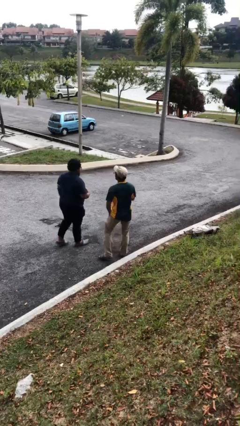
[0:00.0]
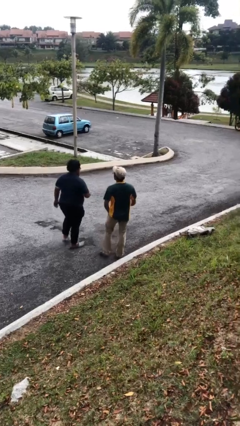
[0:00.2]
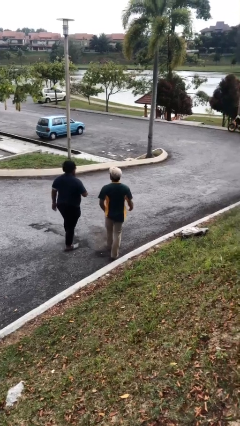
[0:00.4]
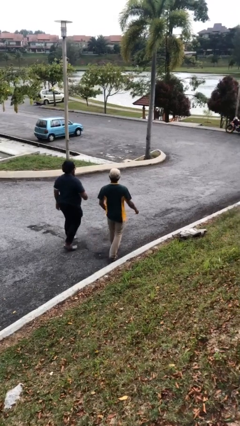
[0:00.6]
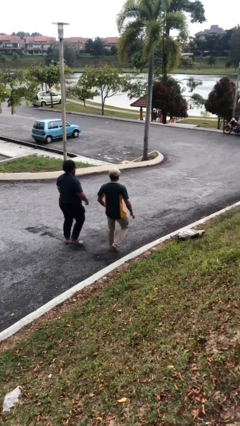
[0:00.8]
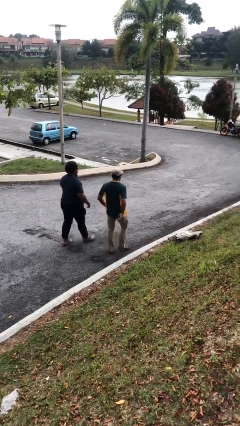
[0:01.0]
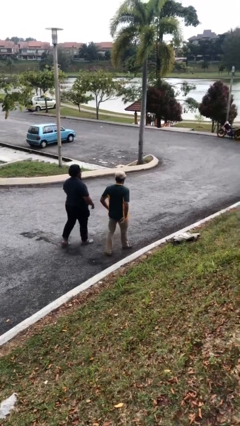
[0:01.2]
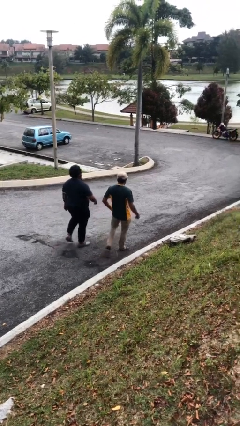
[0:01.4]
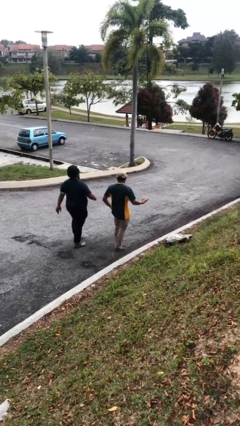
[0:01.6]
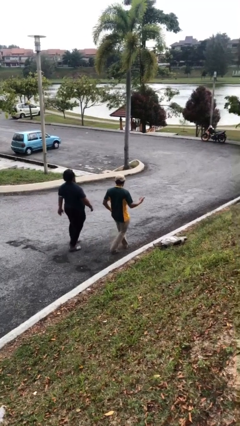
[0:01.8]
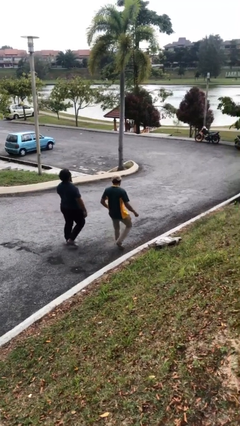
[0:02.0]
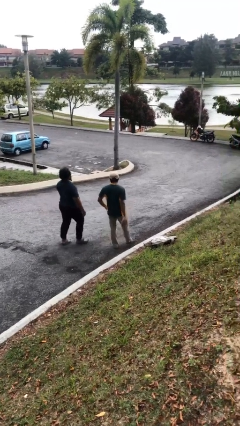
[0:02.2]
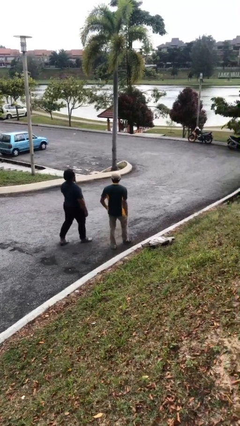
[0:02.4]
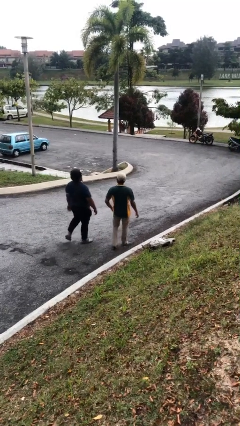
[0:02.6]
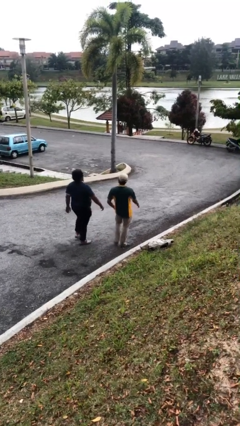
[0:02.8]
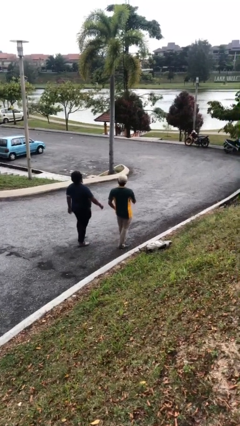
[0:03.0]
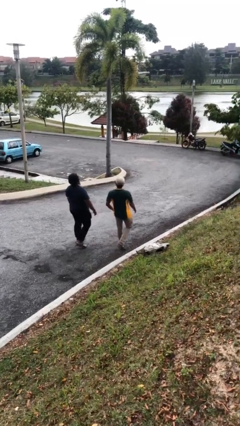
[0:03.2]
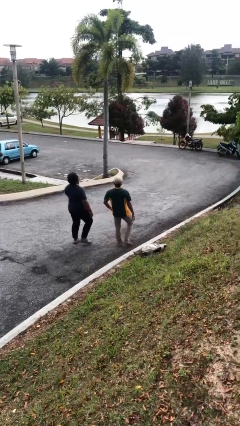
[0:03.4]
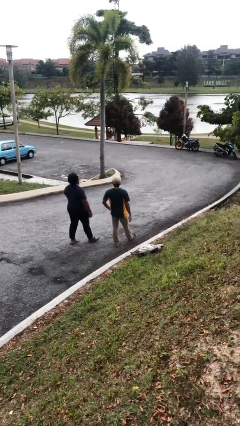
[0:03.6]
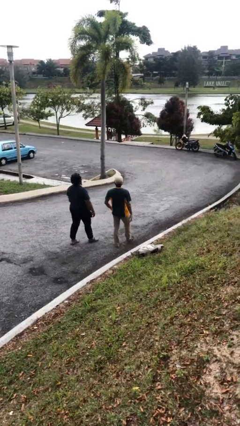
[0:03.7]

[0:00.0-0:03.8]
person talks to person

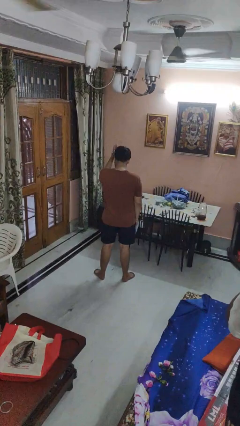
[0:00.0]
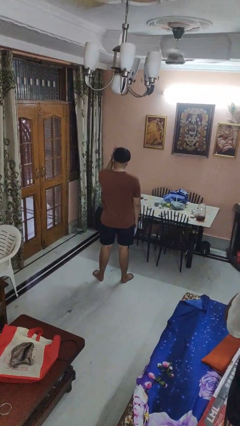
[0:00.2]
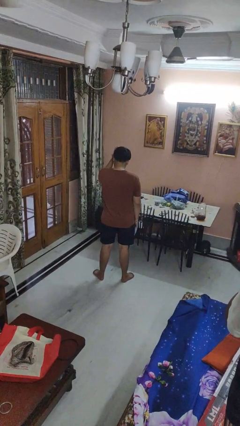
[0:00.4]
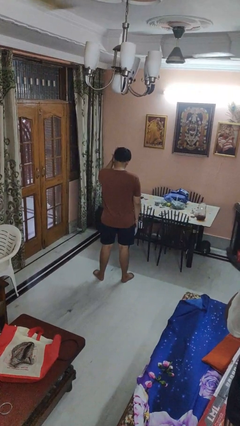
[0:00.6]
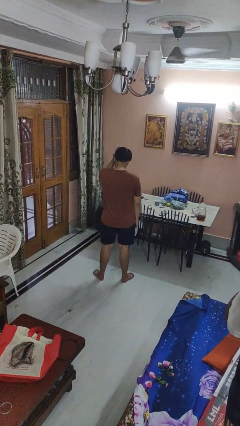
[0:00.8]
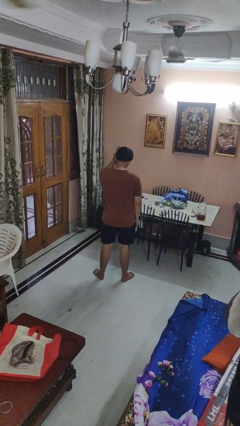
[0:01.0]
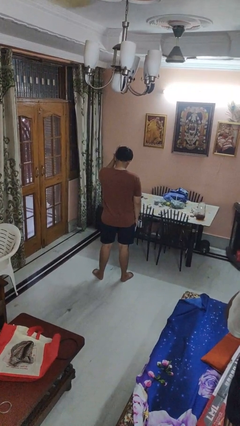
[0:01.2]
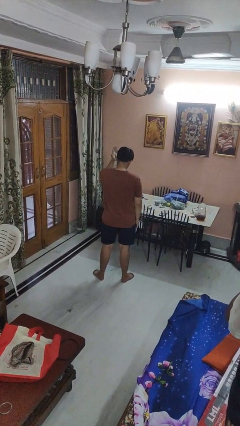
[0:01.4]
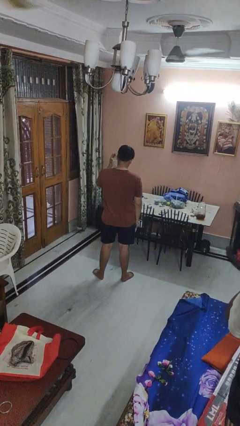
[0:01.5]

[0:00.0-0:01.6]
person pats head

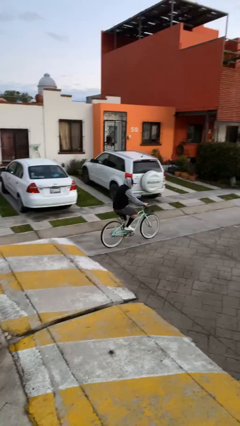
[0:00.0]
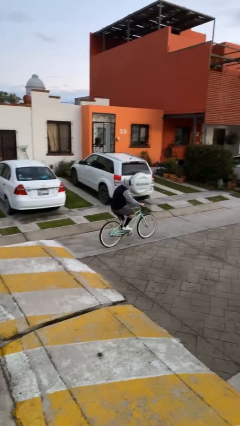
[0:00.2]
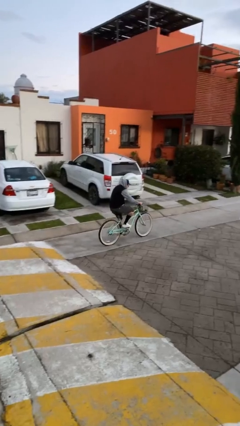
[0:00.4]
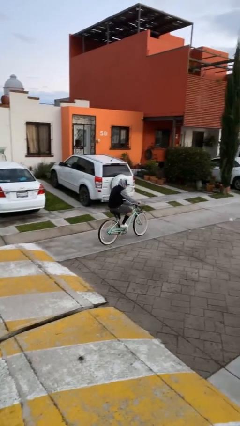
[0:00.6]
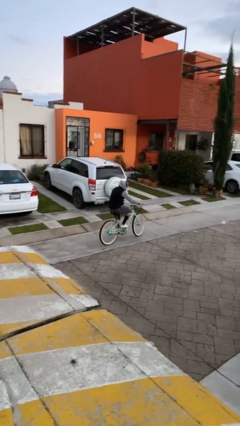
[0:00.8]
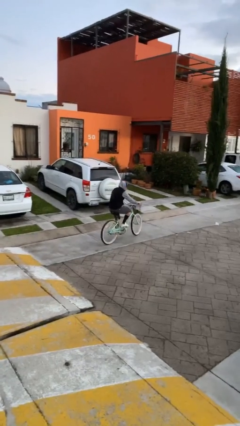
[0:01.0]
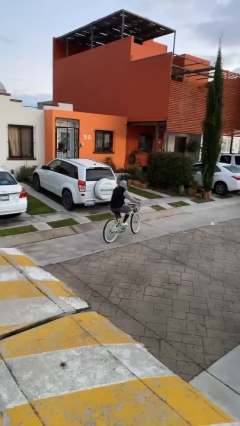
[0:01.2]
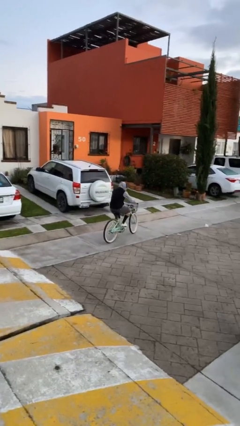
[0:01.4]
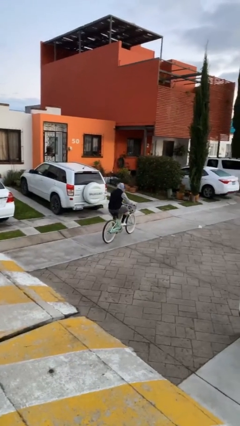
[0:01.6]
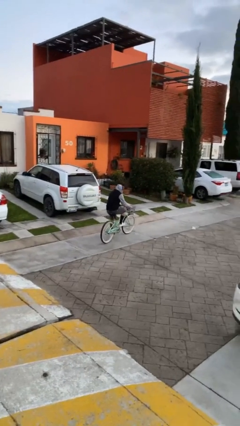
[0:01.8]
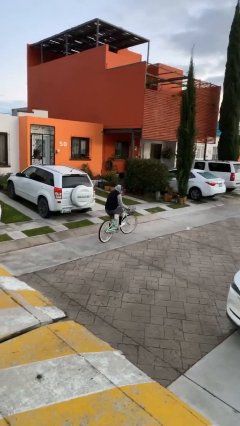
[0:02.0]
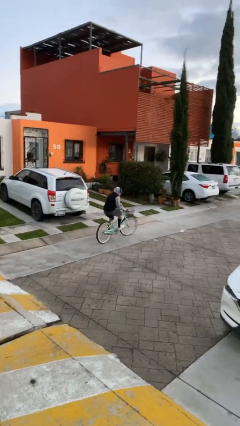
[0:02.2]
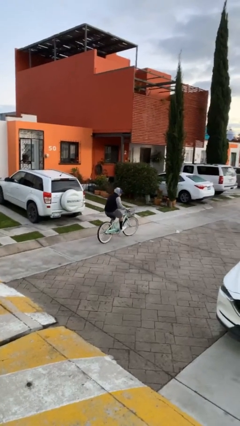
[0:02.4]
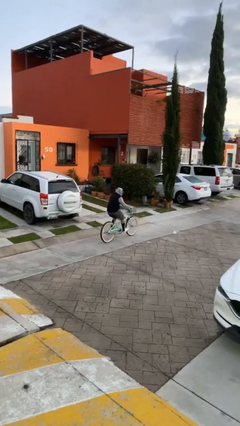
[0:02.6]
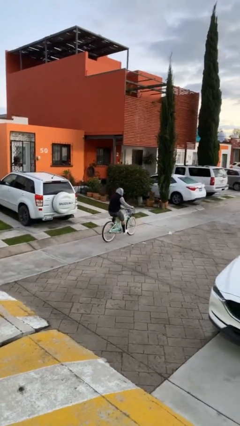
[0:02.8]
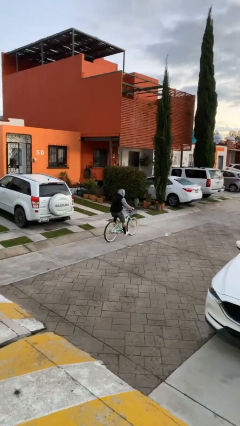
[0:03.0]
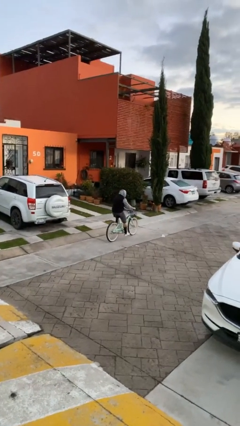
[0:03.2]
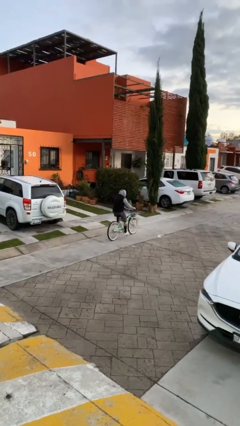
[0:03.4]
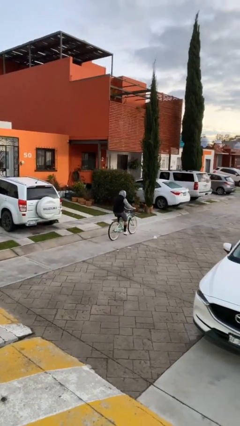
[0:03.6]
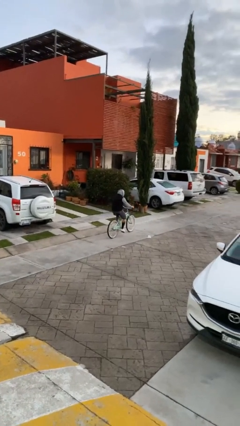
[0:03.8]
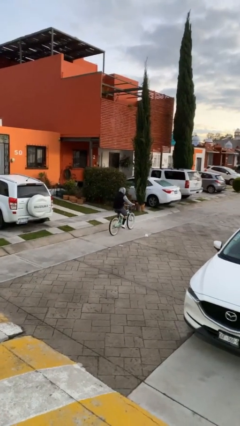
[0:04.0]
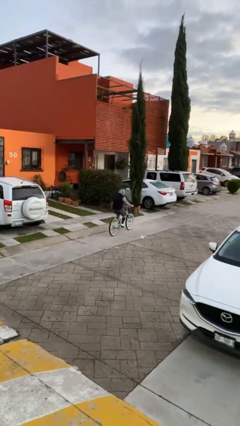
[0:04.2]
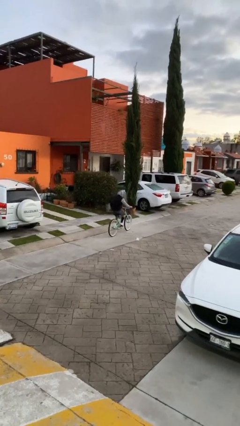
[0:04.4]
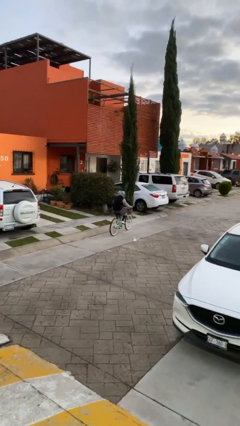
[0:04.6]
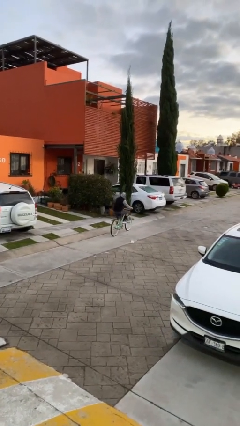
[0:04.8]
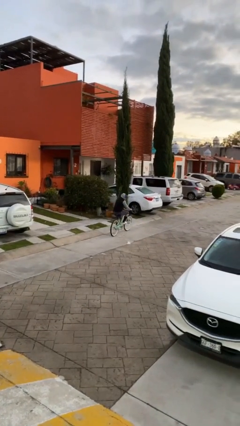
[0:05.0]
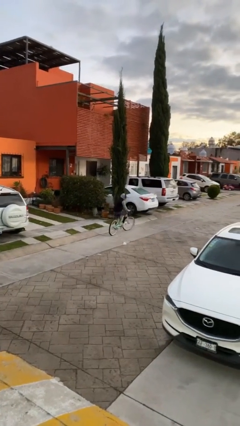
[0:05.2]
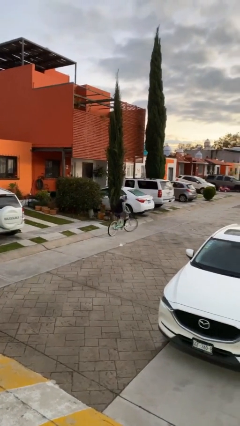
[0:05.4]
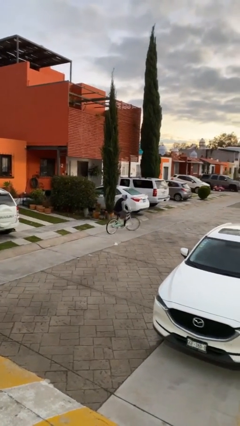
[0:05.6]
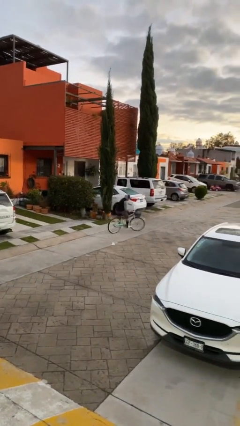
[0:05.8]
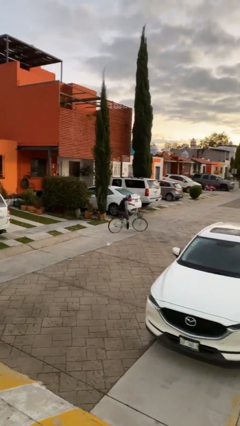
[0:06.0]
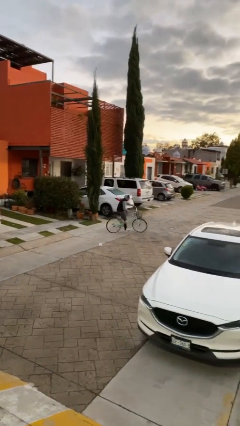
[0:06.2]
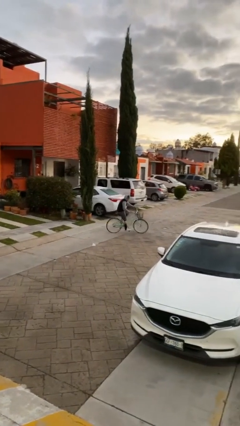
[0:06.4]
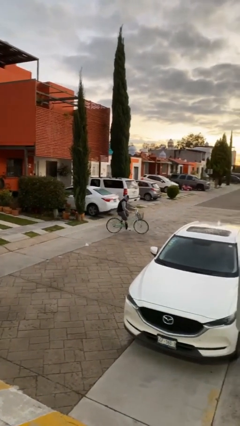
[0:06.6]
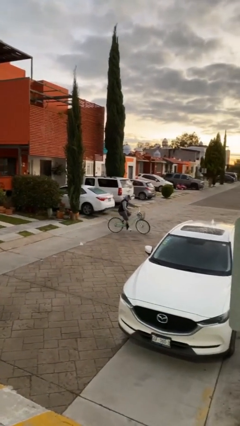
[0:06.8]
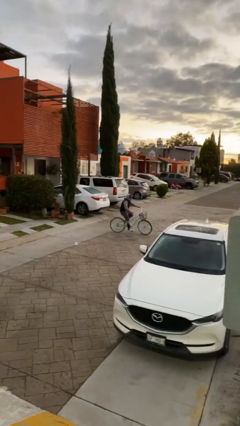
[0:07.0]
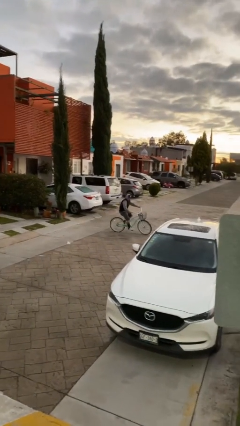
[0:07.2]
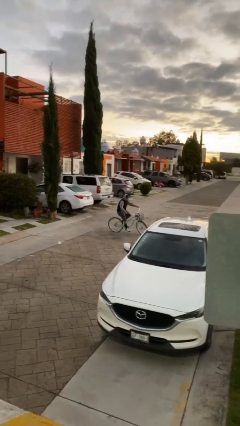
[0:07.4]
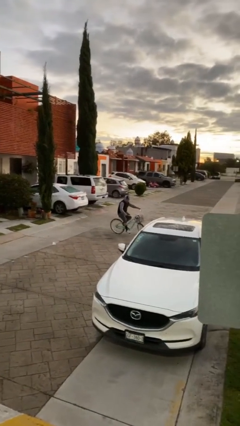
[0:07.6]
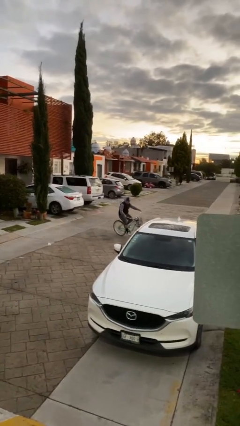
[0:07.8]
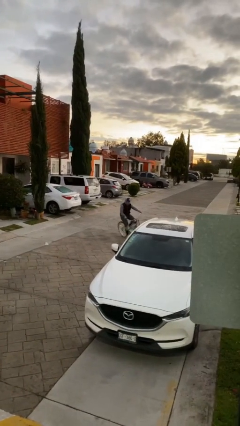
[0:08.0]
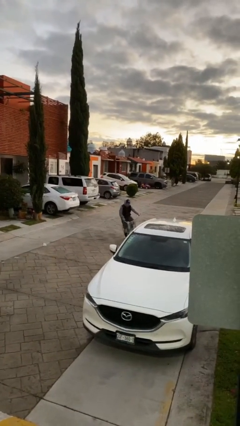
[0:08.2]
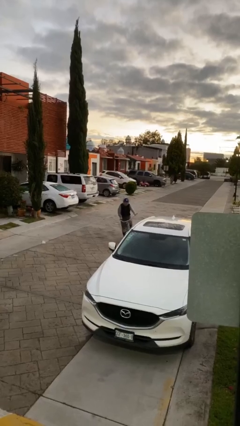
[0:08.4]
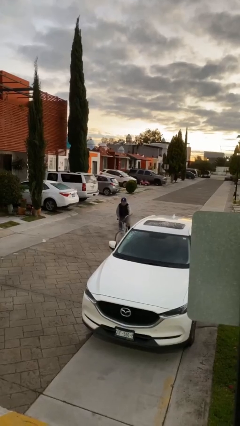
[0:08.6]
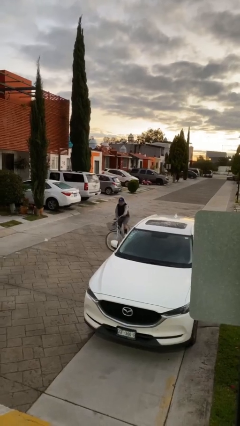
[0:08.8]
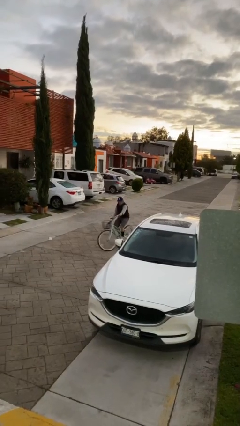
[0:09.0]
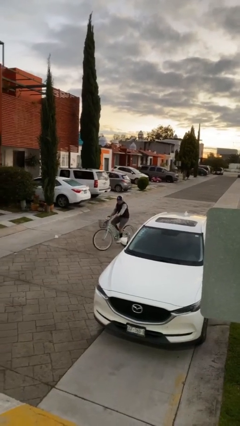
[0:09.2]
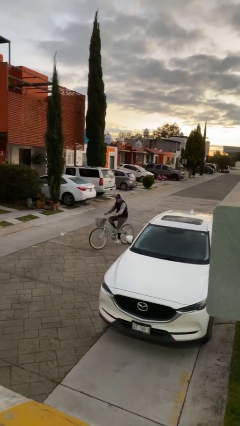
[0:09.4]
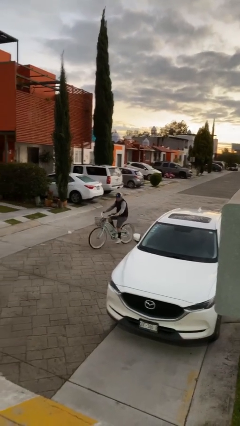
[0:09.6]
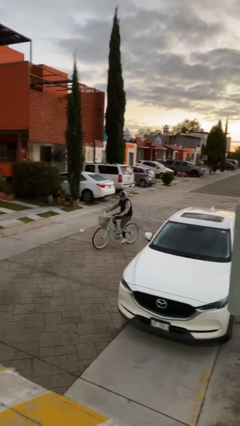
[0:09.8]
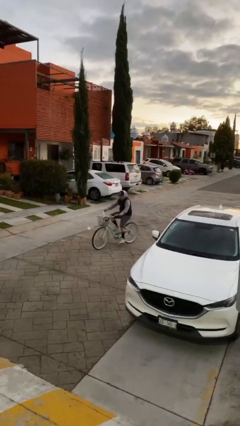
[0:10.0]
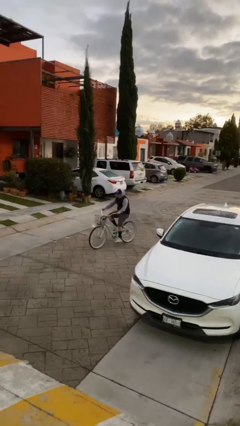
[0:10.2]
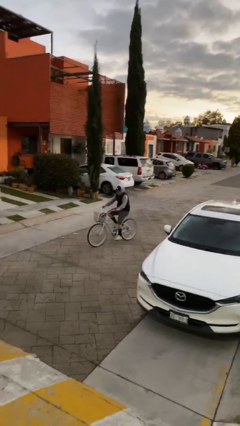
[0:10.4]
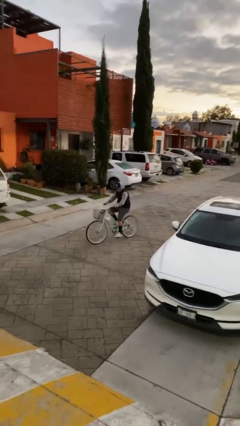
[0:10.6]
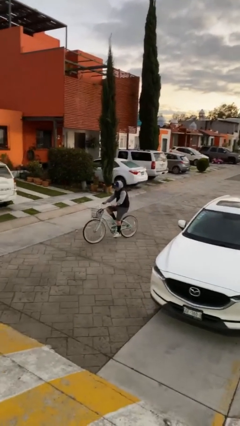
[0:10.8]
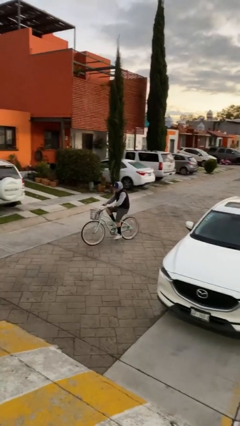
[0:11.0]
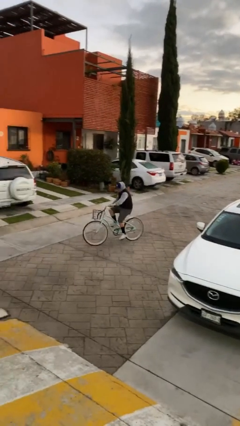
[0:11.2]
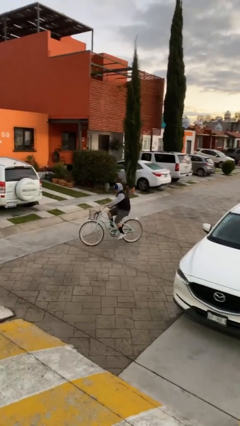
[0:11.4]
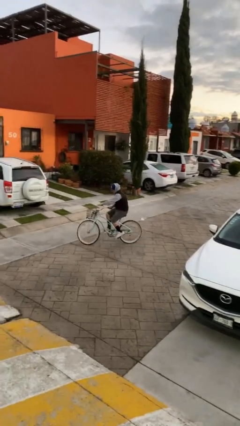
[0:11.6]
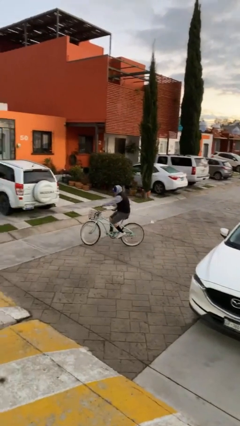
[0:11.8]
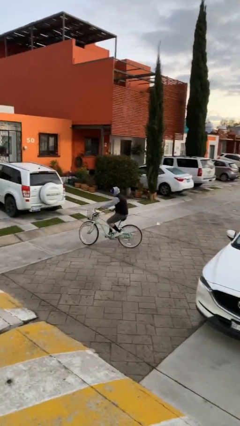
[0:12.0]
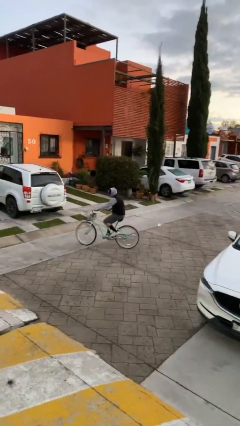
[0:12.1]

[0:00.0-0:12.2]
person rides bicycle

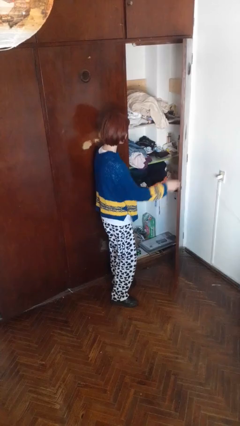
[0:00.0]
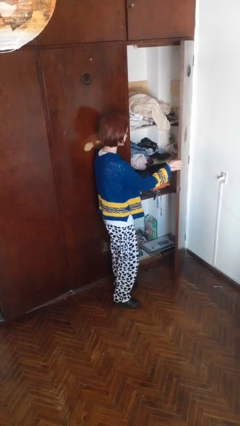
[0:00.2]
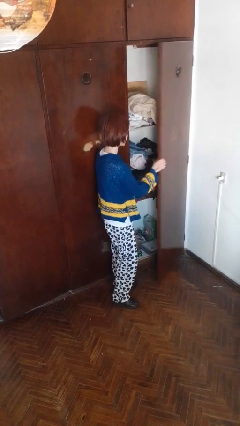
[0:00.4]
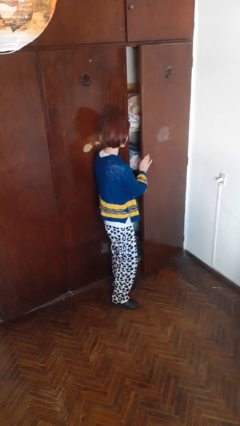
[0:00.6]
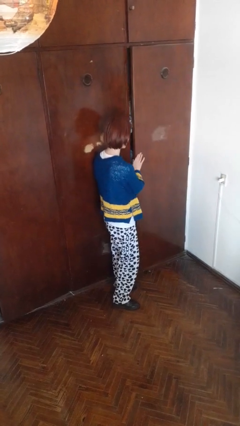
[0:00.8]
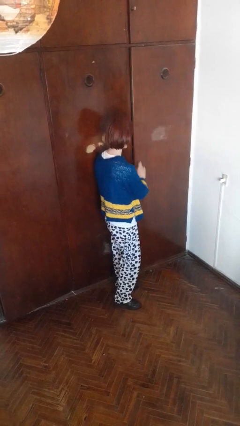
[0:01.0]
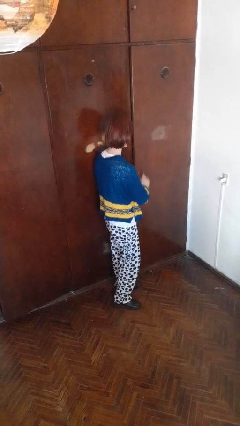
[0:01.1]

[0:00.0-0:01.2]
person closes closet door
